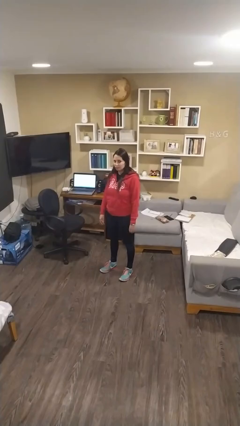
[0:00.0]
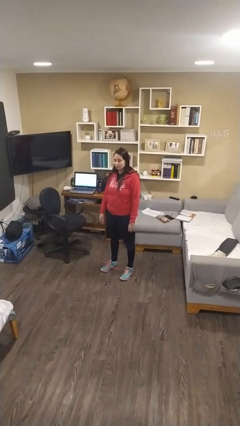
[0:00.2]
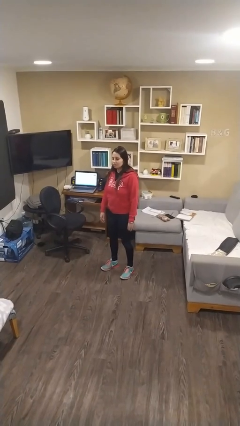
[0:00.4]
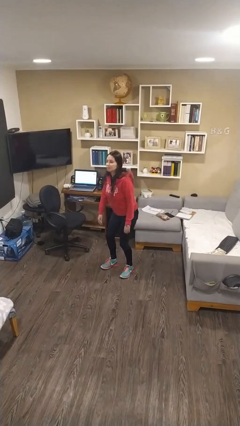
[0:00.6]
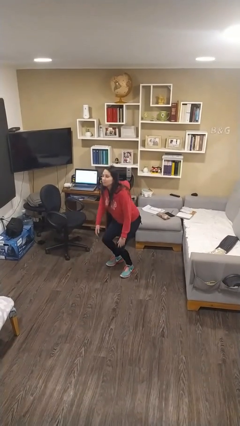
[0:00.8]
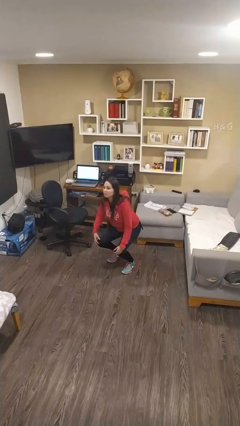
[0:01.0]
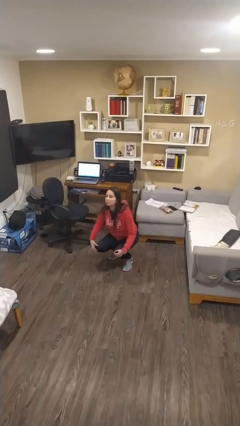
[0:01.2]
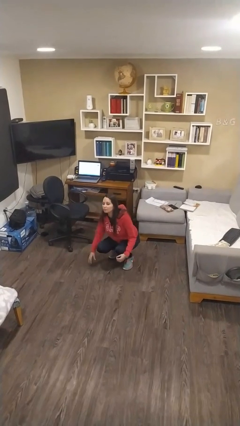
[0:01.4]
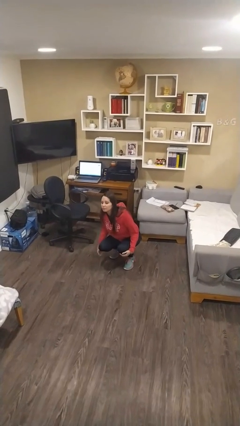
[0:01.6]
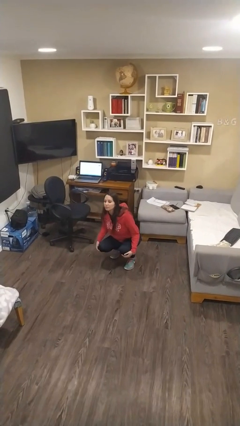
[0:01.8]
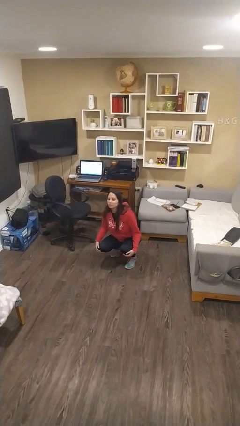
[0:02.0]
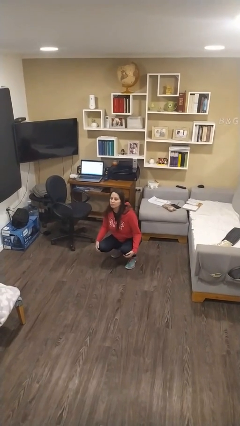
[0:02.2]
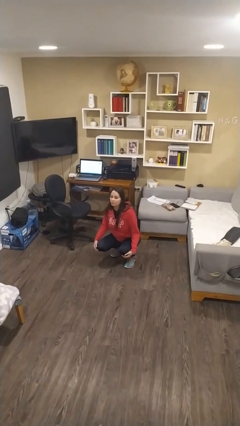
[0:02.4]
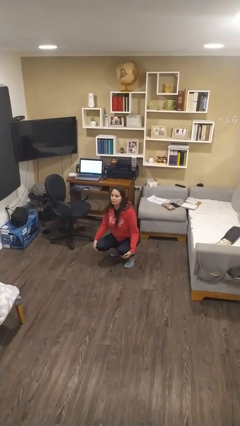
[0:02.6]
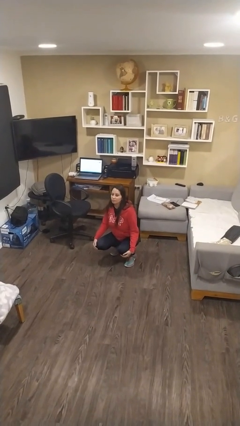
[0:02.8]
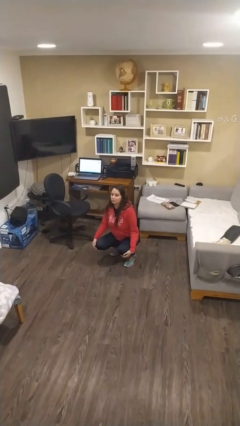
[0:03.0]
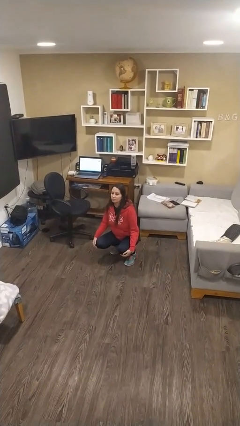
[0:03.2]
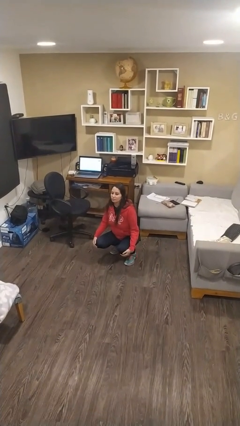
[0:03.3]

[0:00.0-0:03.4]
person squats

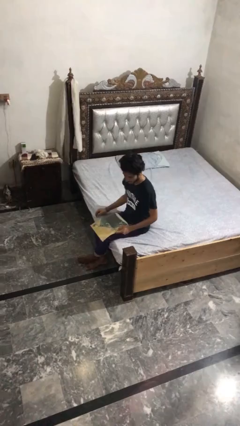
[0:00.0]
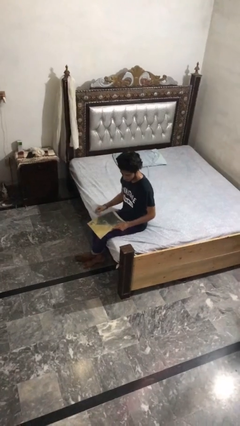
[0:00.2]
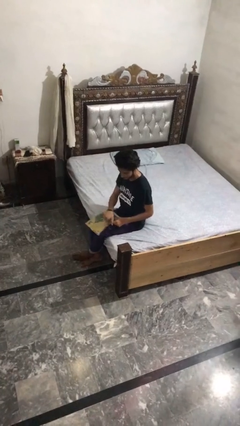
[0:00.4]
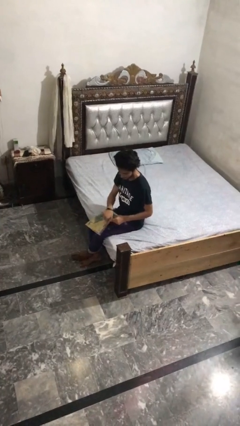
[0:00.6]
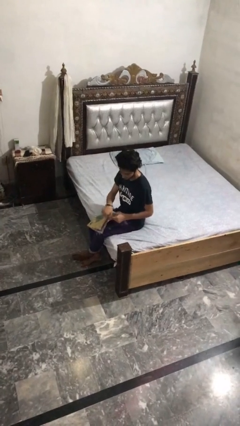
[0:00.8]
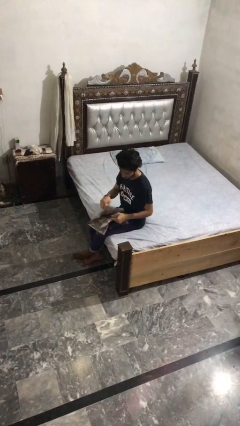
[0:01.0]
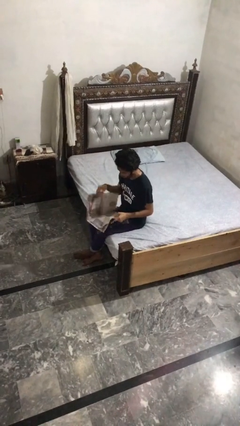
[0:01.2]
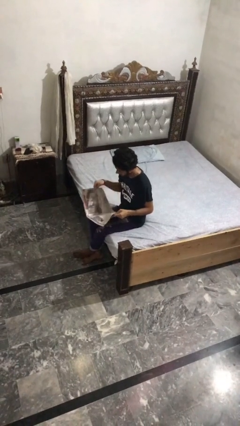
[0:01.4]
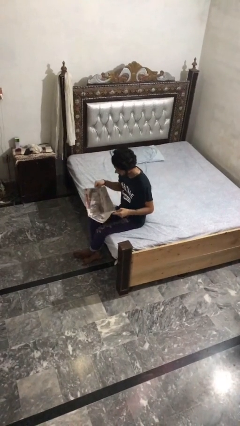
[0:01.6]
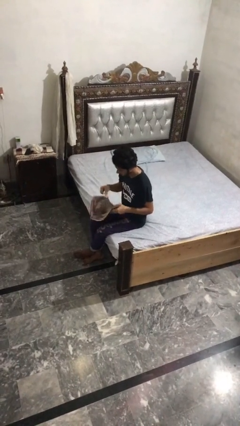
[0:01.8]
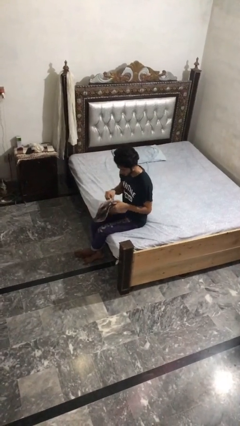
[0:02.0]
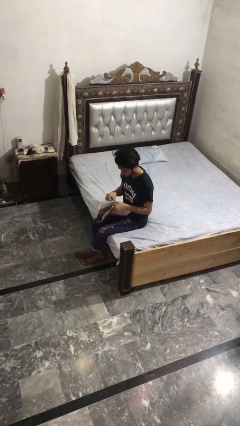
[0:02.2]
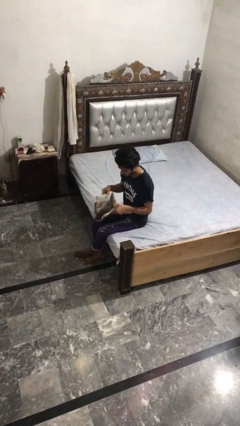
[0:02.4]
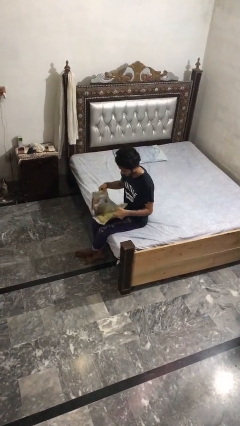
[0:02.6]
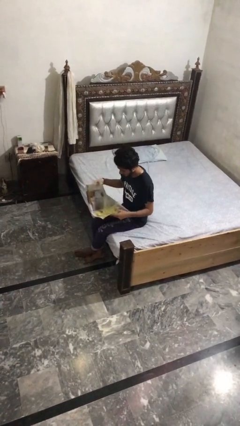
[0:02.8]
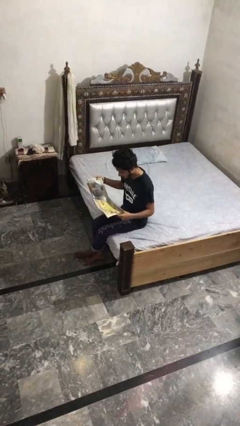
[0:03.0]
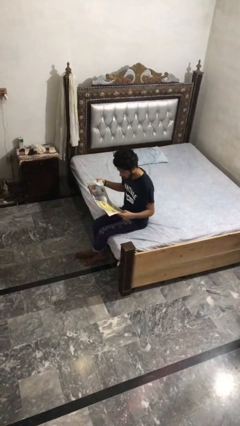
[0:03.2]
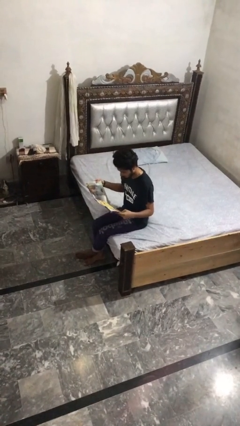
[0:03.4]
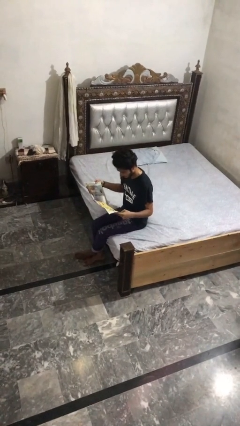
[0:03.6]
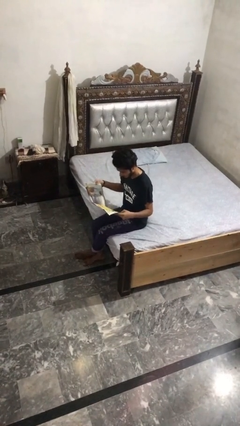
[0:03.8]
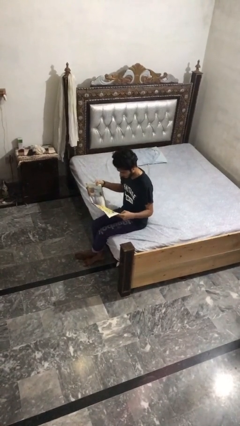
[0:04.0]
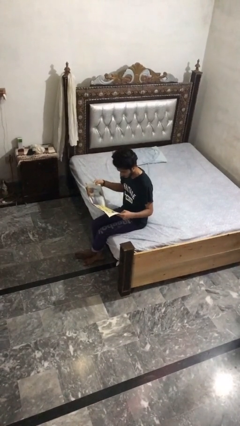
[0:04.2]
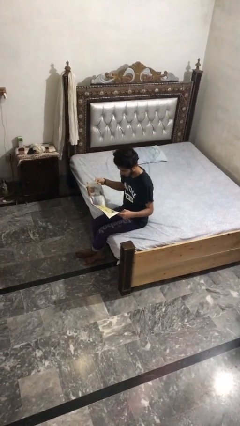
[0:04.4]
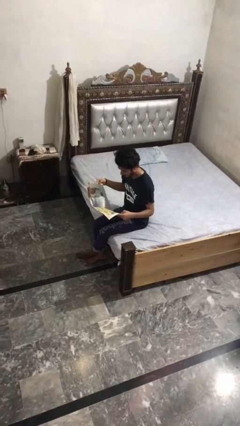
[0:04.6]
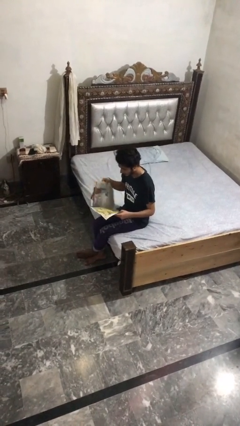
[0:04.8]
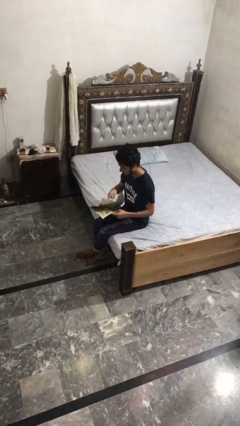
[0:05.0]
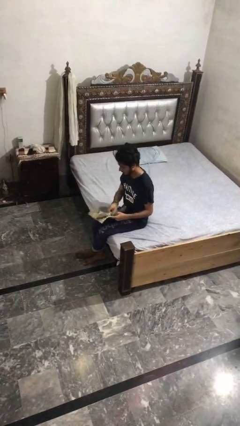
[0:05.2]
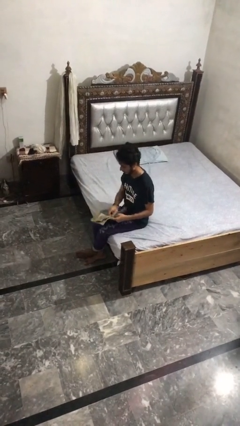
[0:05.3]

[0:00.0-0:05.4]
person reads magazine

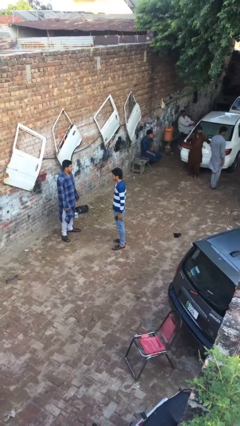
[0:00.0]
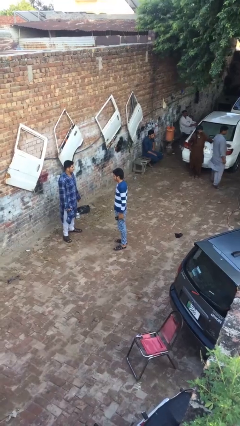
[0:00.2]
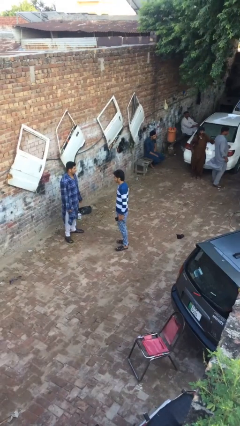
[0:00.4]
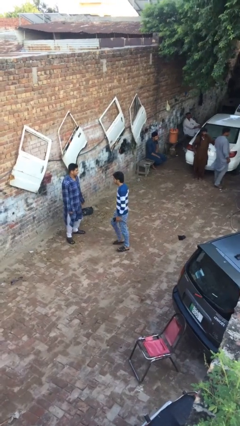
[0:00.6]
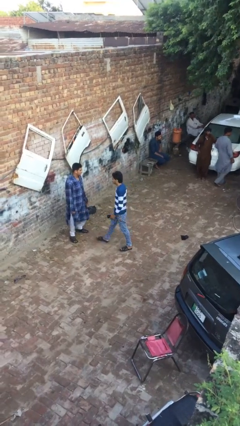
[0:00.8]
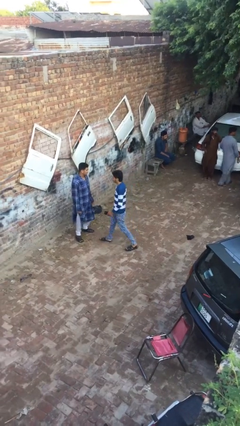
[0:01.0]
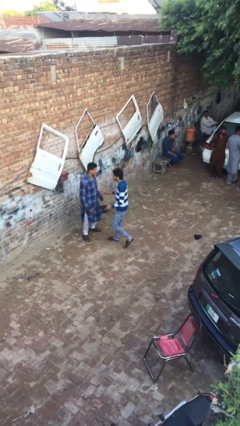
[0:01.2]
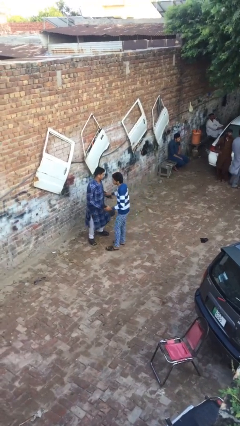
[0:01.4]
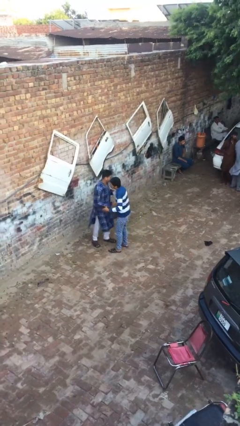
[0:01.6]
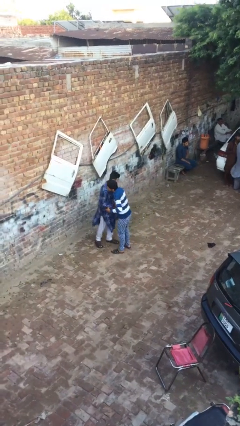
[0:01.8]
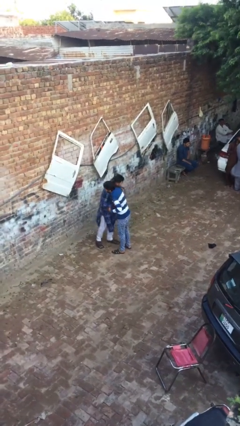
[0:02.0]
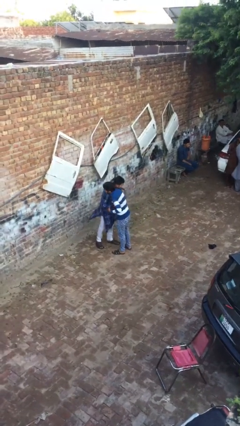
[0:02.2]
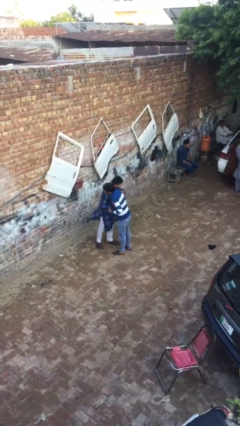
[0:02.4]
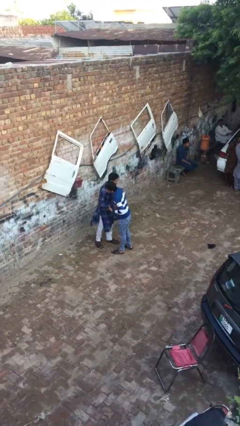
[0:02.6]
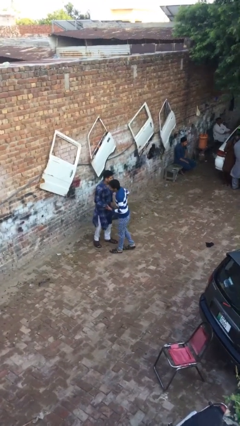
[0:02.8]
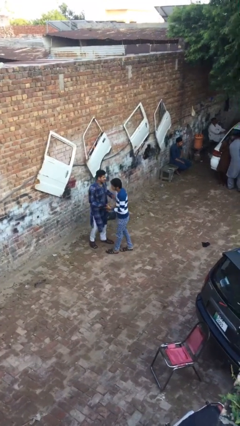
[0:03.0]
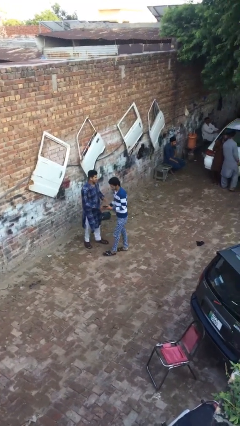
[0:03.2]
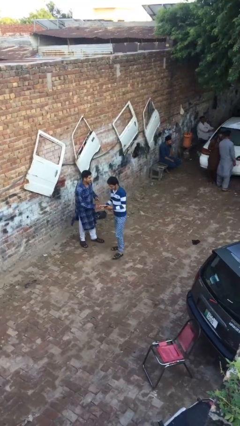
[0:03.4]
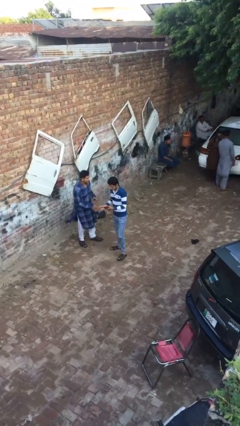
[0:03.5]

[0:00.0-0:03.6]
person embraces person

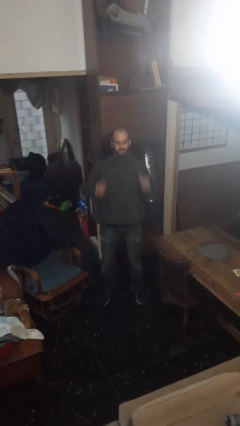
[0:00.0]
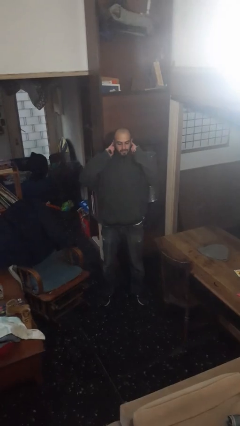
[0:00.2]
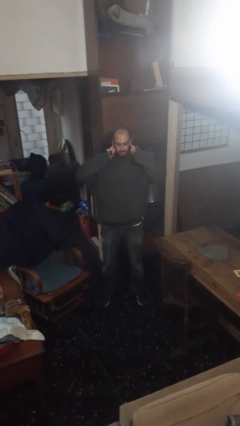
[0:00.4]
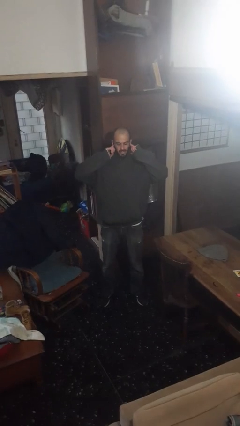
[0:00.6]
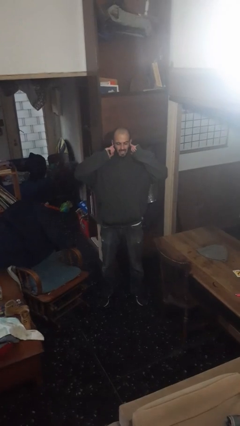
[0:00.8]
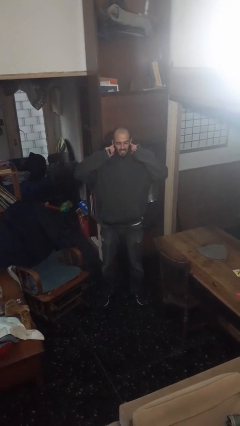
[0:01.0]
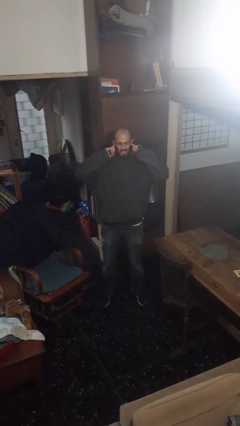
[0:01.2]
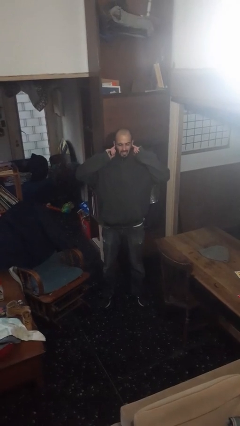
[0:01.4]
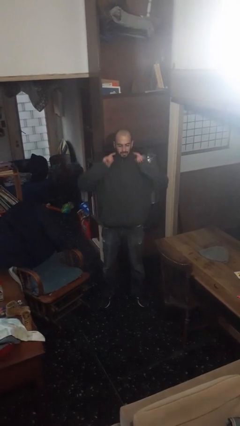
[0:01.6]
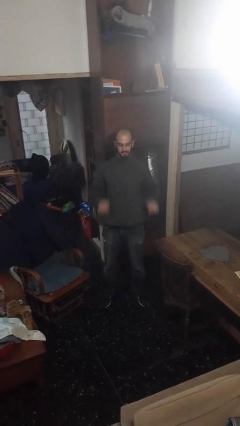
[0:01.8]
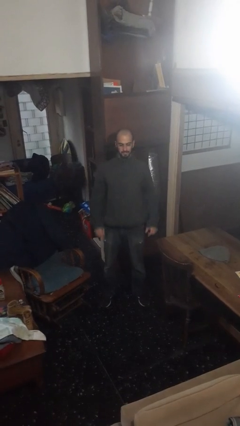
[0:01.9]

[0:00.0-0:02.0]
person puts fingers in ear

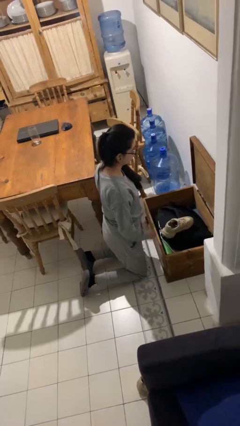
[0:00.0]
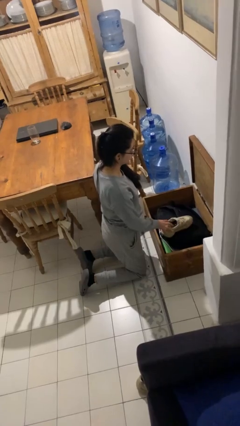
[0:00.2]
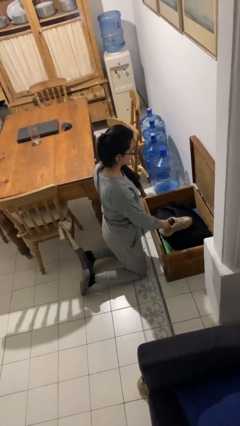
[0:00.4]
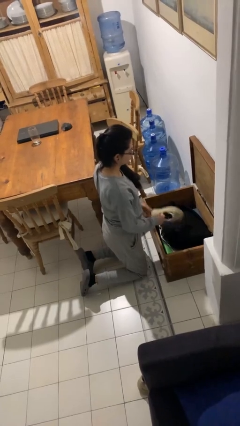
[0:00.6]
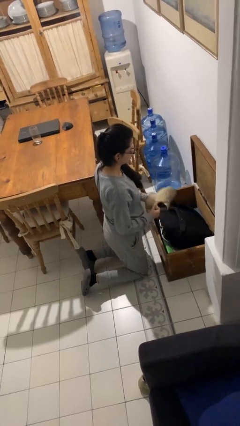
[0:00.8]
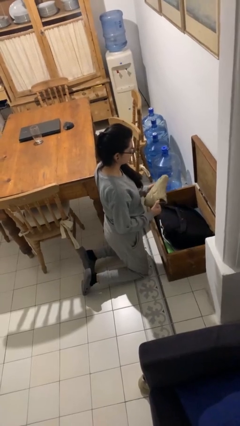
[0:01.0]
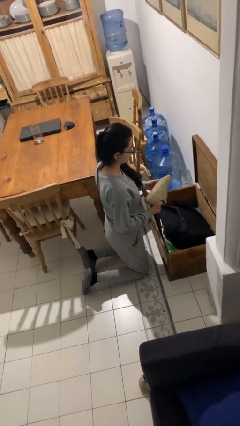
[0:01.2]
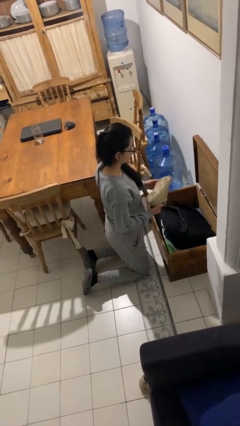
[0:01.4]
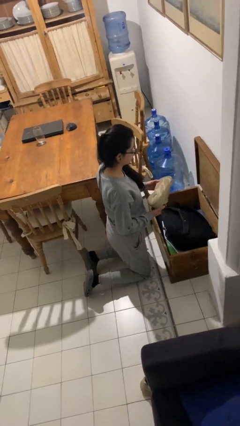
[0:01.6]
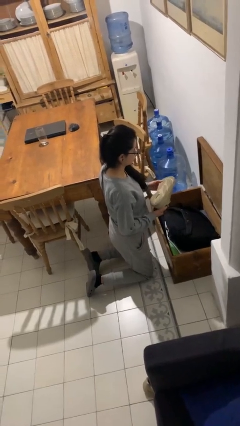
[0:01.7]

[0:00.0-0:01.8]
person takes object from box

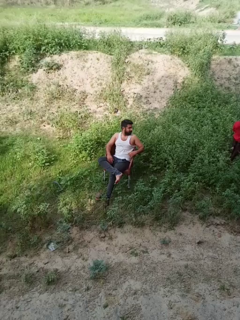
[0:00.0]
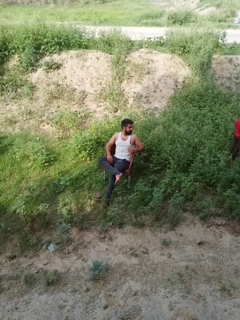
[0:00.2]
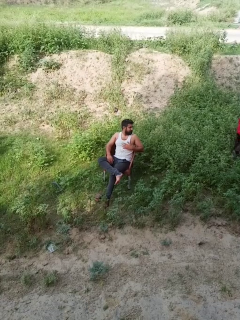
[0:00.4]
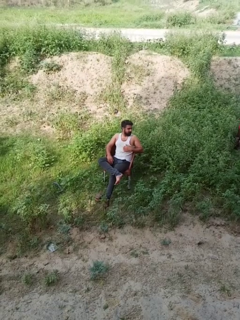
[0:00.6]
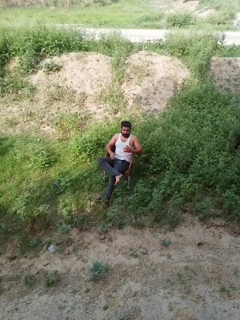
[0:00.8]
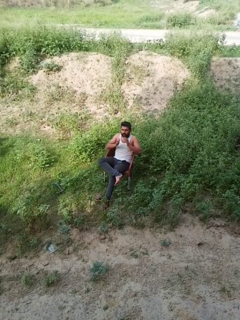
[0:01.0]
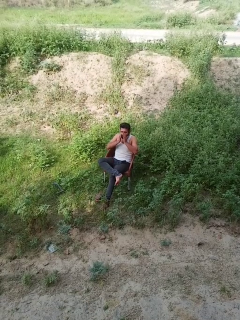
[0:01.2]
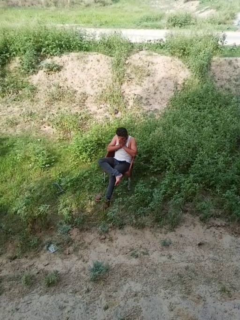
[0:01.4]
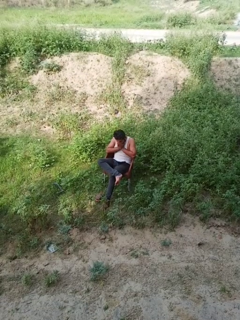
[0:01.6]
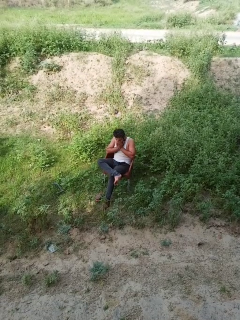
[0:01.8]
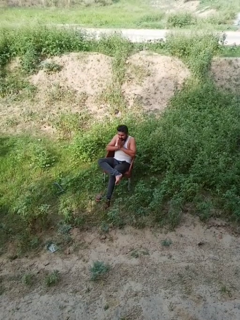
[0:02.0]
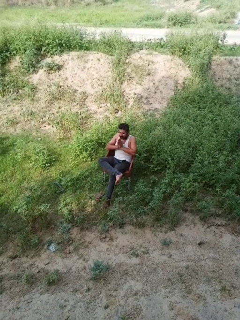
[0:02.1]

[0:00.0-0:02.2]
person sneezes into hand
